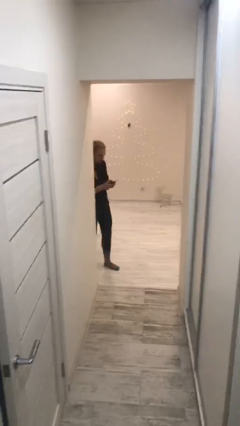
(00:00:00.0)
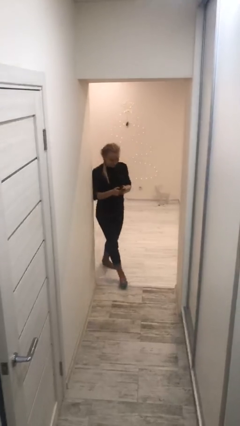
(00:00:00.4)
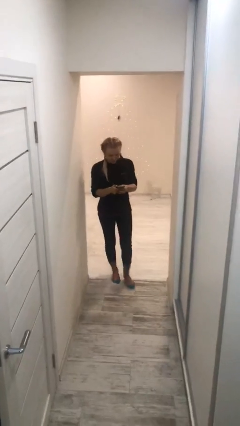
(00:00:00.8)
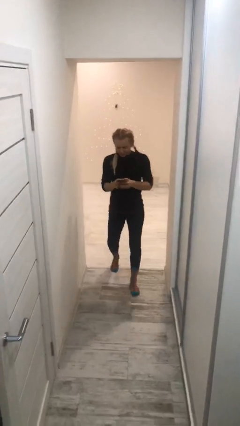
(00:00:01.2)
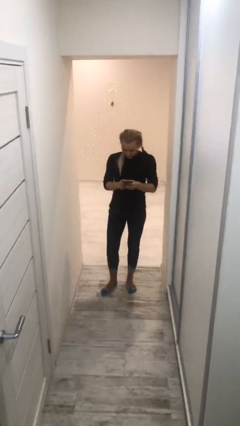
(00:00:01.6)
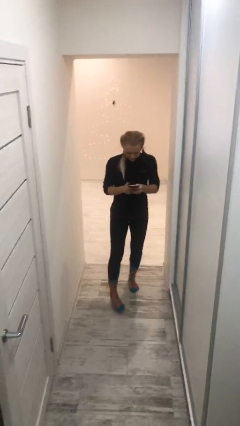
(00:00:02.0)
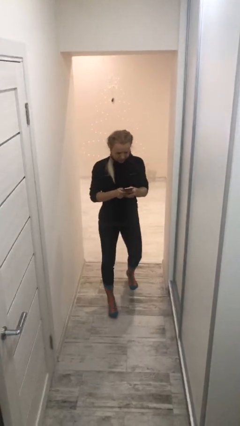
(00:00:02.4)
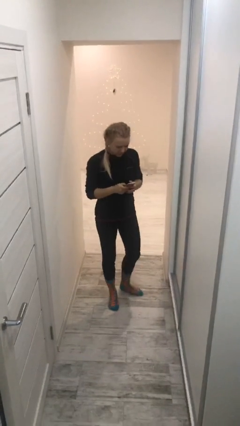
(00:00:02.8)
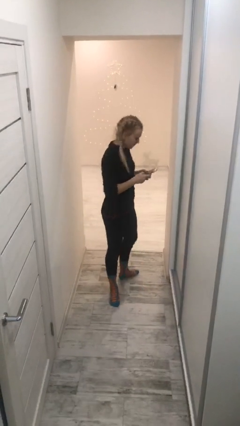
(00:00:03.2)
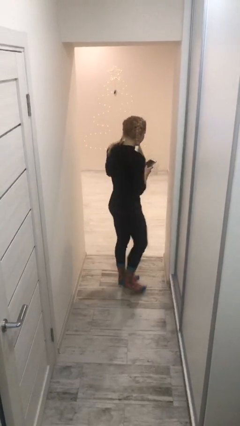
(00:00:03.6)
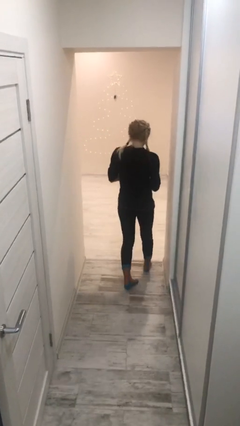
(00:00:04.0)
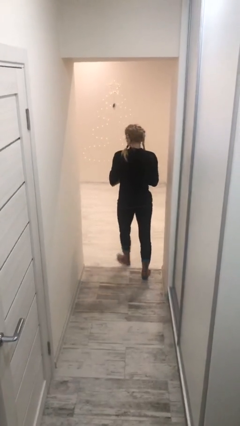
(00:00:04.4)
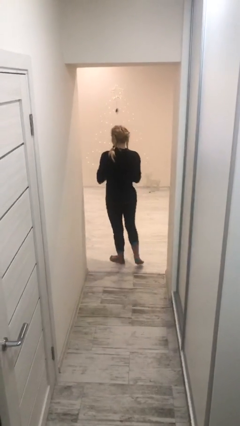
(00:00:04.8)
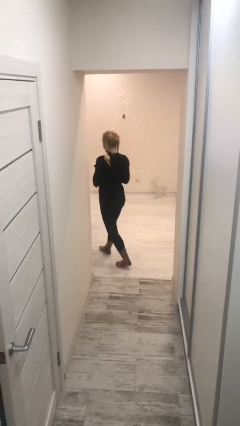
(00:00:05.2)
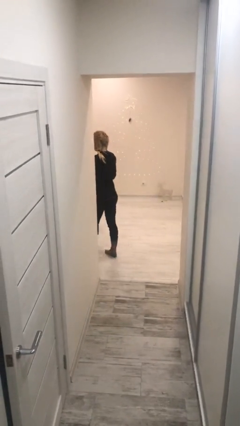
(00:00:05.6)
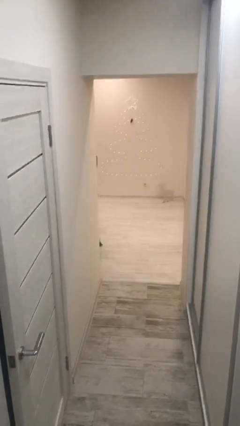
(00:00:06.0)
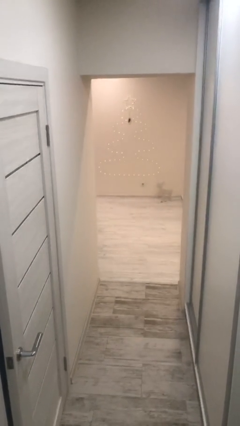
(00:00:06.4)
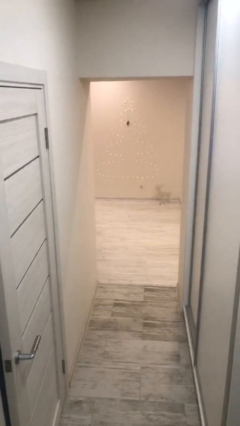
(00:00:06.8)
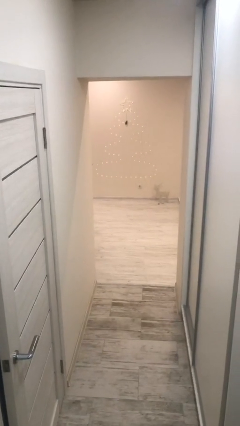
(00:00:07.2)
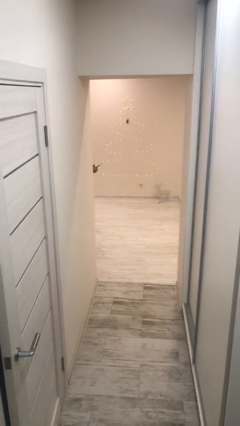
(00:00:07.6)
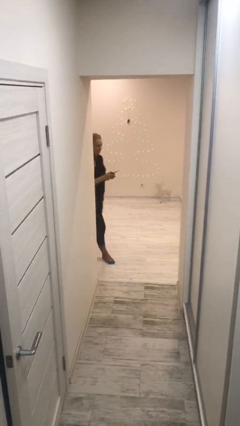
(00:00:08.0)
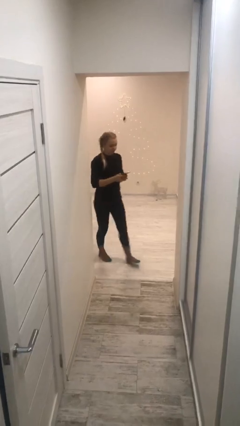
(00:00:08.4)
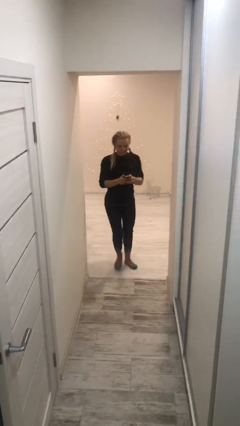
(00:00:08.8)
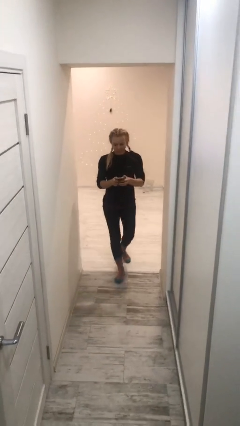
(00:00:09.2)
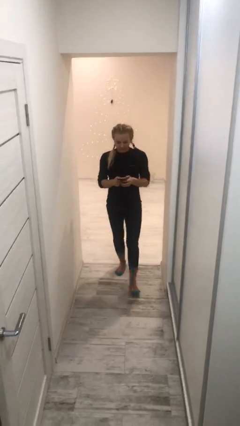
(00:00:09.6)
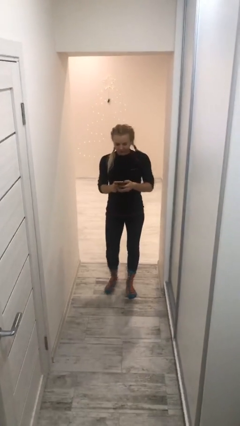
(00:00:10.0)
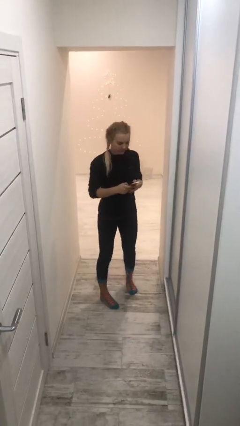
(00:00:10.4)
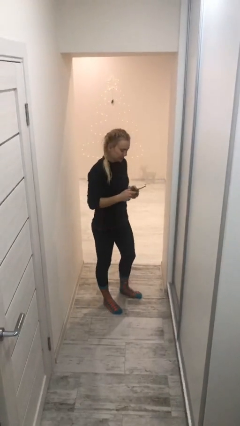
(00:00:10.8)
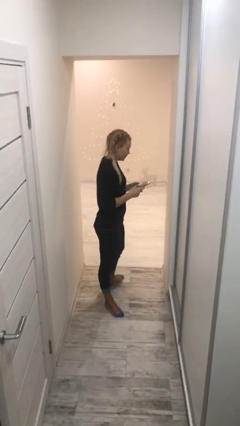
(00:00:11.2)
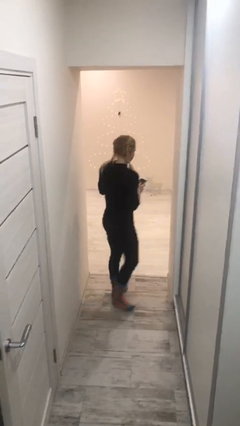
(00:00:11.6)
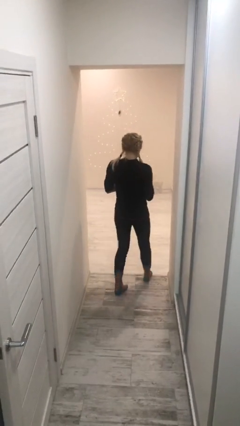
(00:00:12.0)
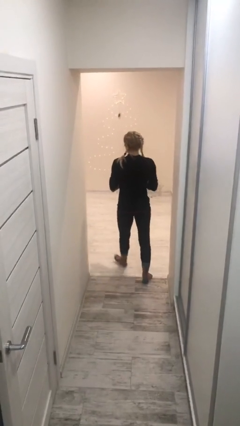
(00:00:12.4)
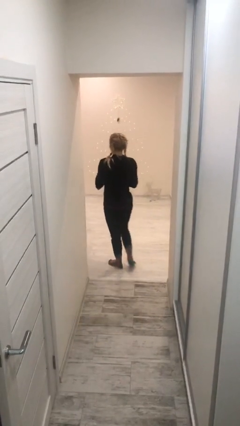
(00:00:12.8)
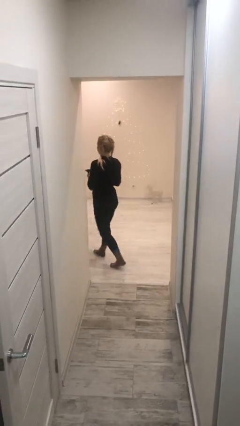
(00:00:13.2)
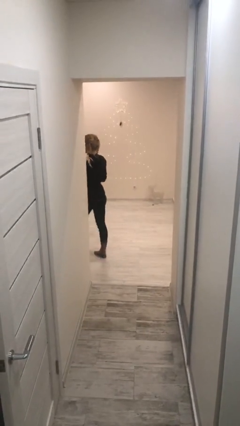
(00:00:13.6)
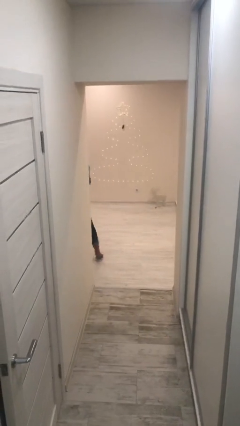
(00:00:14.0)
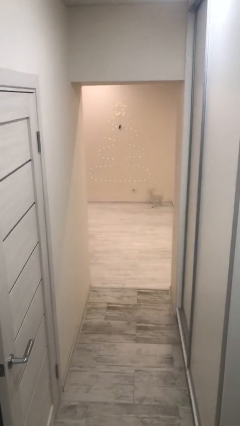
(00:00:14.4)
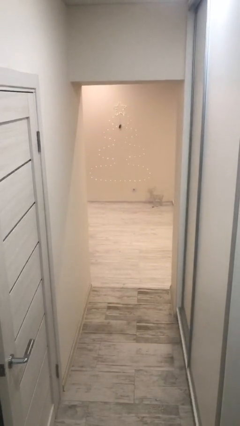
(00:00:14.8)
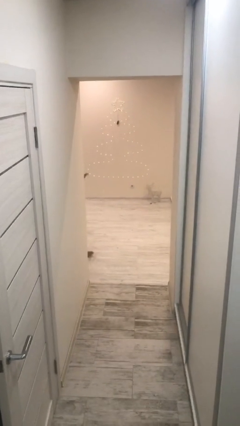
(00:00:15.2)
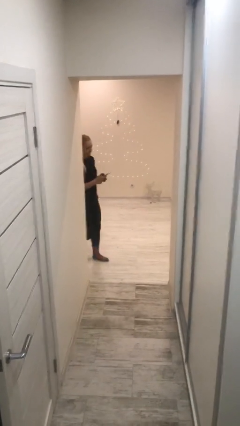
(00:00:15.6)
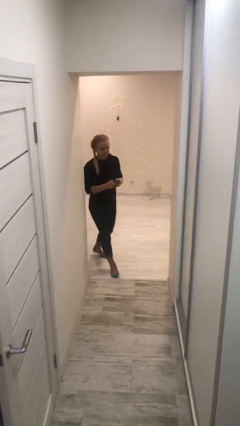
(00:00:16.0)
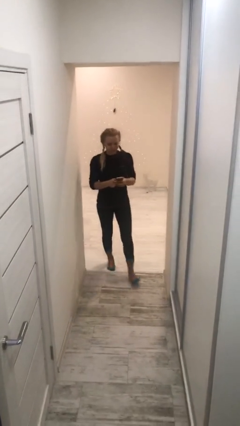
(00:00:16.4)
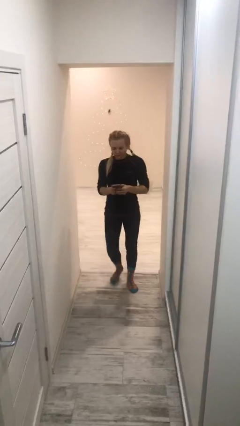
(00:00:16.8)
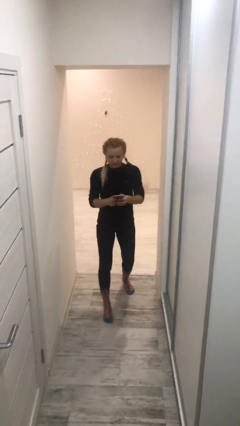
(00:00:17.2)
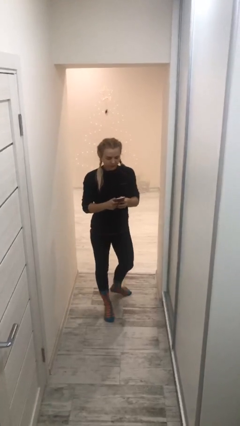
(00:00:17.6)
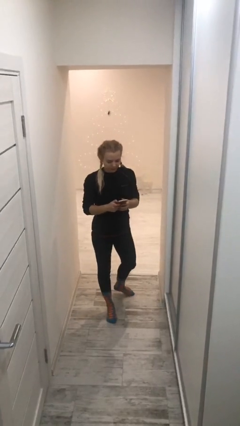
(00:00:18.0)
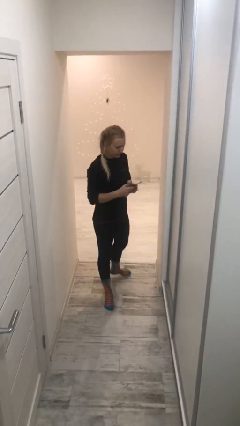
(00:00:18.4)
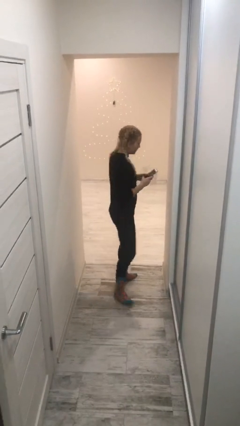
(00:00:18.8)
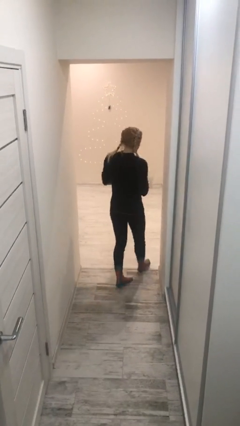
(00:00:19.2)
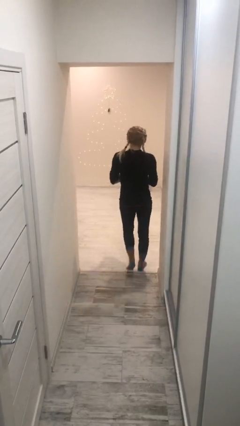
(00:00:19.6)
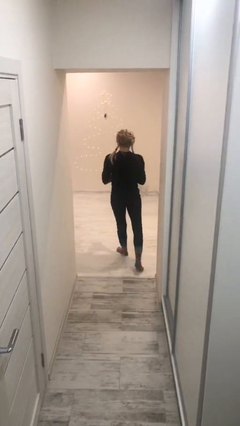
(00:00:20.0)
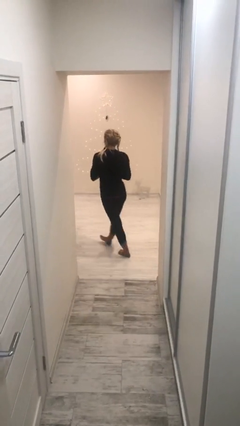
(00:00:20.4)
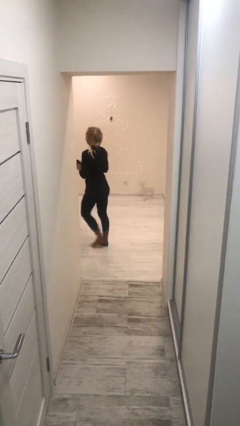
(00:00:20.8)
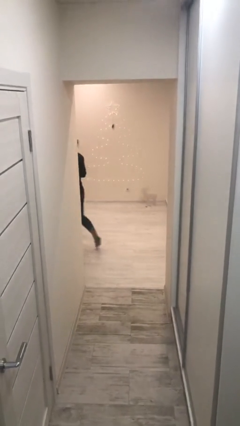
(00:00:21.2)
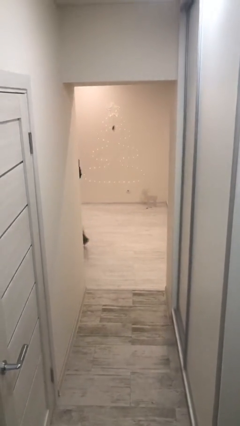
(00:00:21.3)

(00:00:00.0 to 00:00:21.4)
person texts on phone

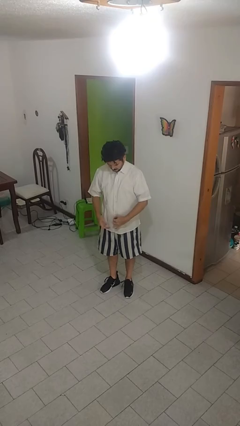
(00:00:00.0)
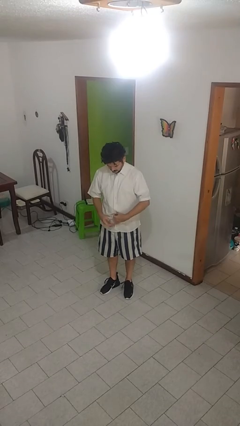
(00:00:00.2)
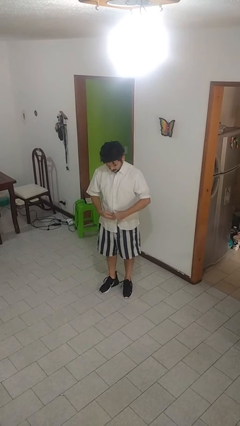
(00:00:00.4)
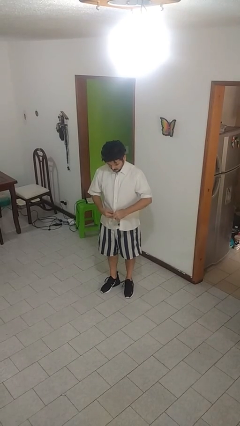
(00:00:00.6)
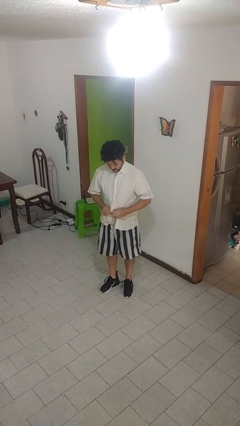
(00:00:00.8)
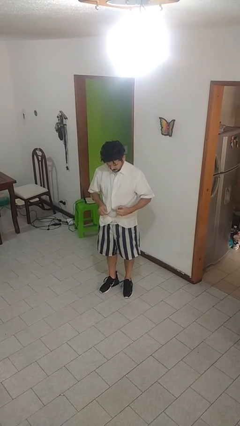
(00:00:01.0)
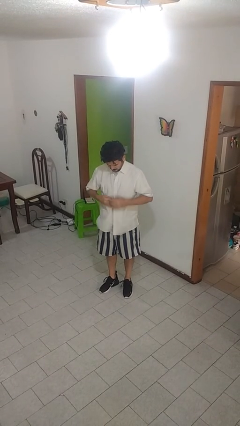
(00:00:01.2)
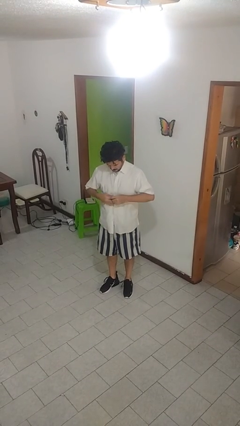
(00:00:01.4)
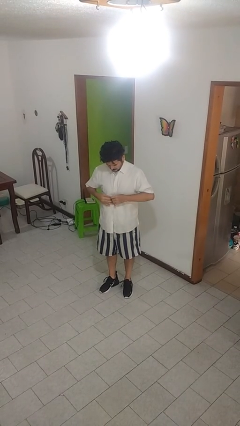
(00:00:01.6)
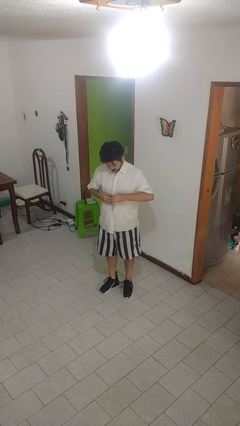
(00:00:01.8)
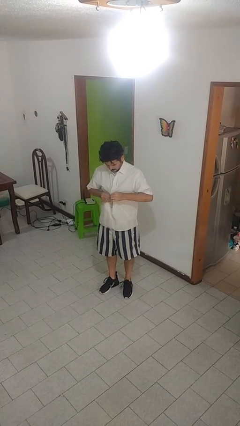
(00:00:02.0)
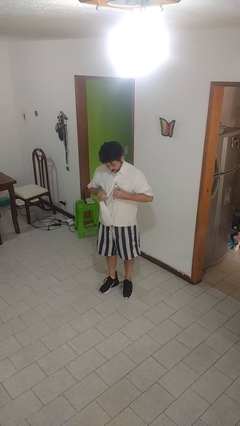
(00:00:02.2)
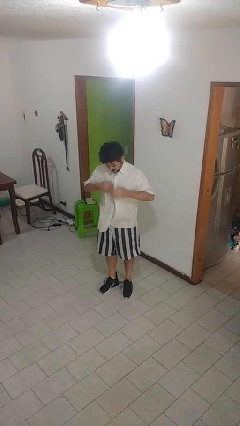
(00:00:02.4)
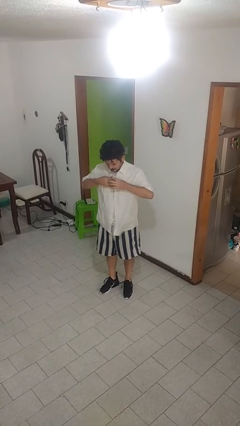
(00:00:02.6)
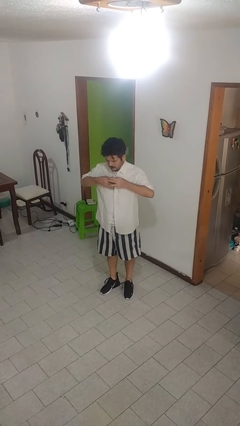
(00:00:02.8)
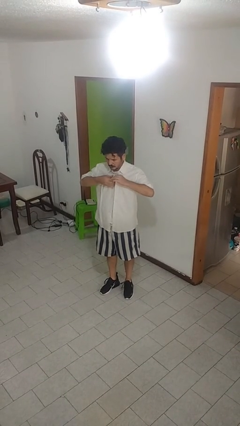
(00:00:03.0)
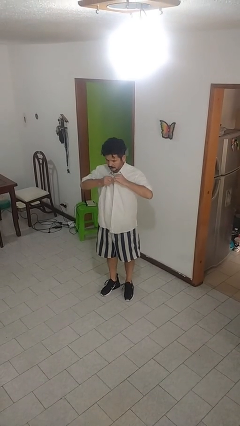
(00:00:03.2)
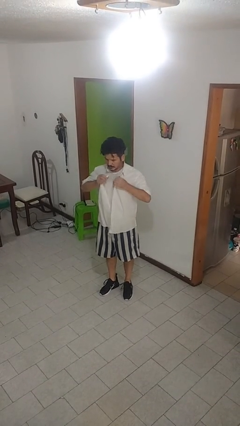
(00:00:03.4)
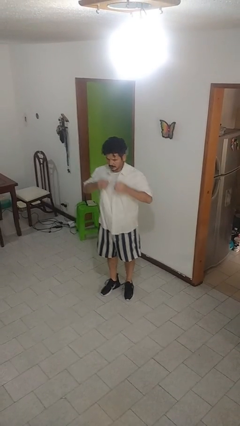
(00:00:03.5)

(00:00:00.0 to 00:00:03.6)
person unbuttons shirt

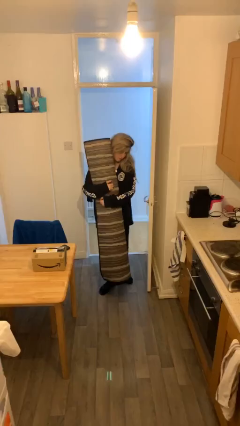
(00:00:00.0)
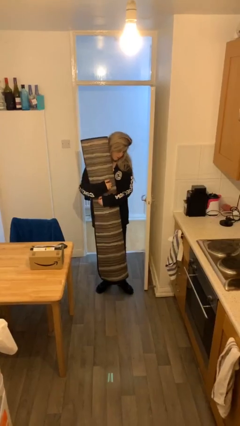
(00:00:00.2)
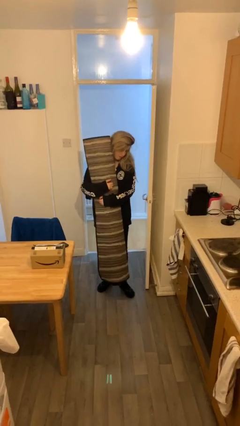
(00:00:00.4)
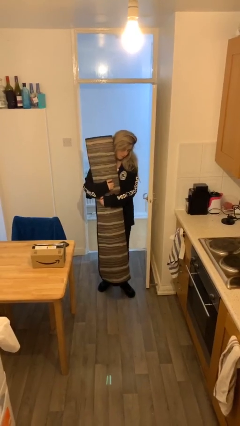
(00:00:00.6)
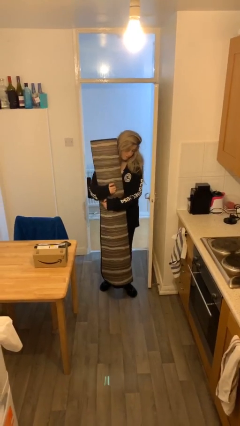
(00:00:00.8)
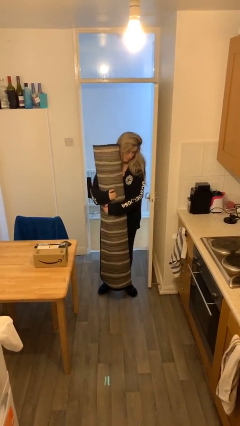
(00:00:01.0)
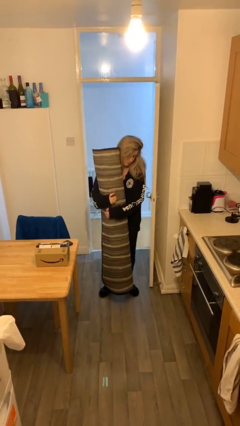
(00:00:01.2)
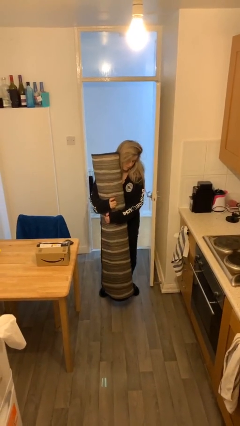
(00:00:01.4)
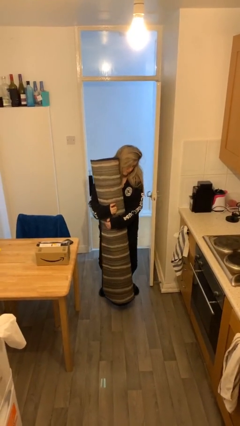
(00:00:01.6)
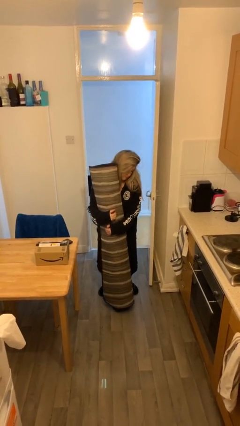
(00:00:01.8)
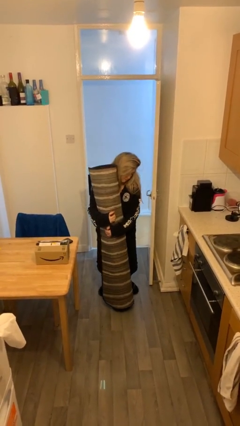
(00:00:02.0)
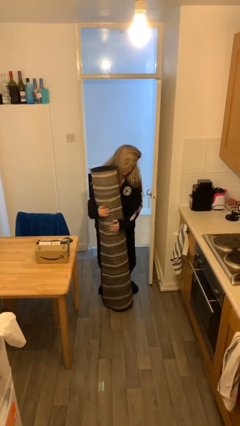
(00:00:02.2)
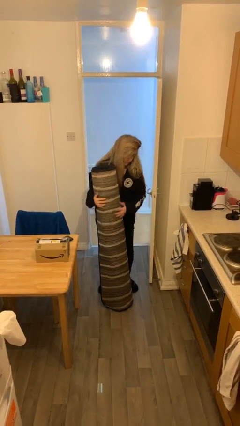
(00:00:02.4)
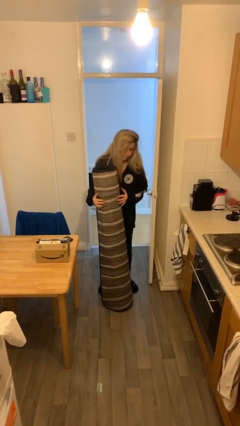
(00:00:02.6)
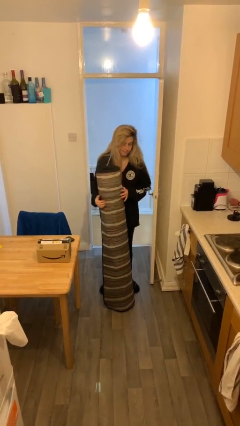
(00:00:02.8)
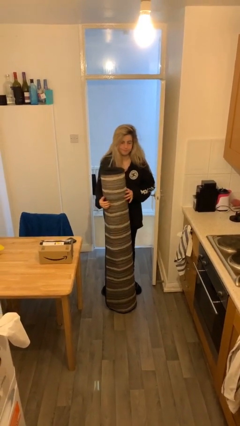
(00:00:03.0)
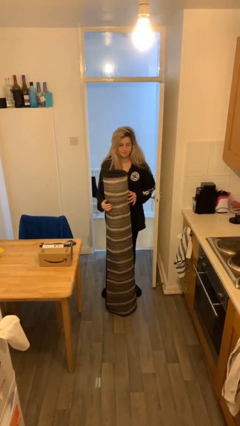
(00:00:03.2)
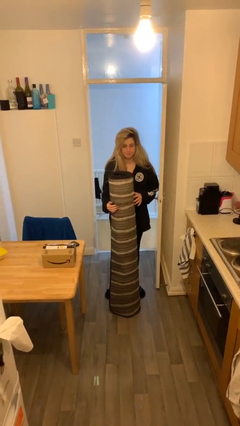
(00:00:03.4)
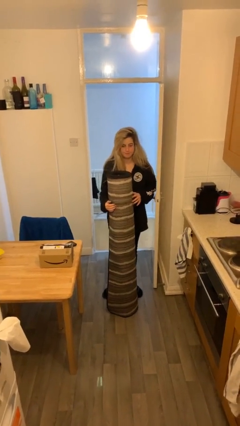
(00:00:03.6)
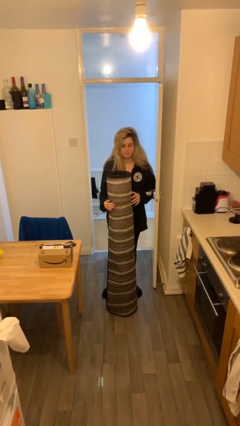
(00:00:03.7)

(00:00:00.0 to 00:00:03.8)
person puts down object on floor
